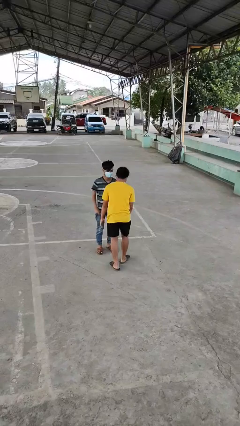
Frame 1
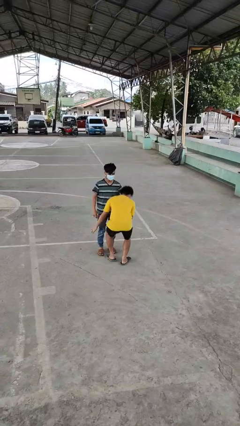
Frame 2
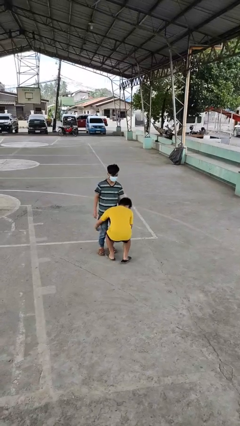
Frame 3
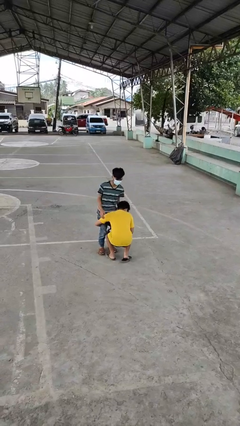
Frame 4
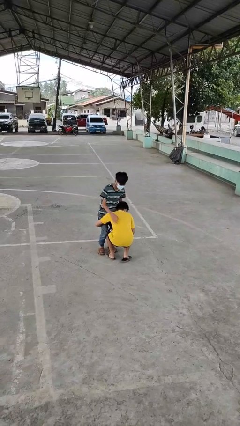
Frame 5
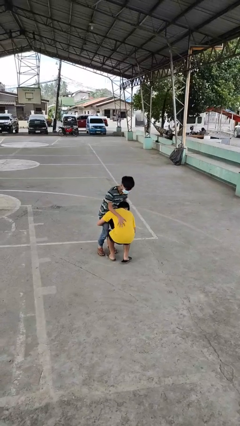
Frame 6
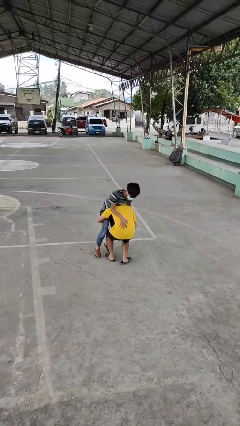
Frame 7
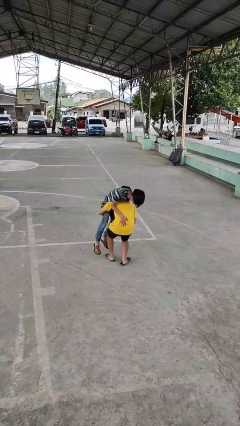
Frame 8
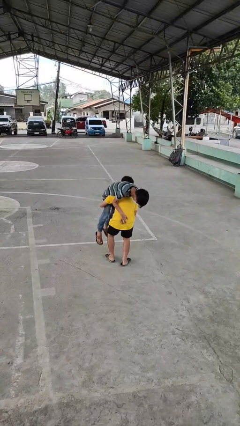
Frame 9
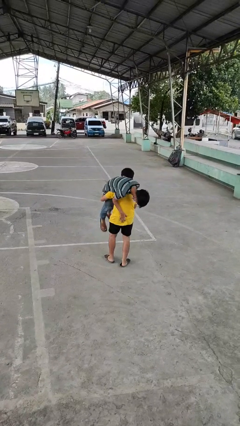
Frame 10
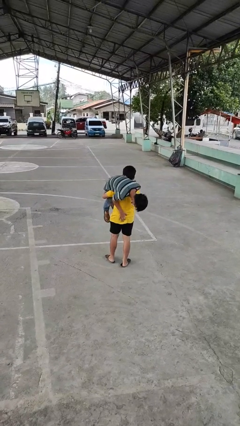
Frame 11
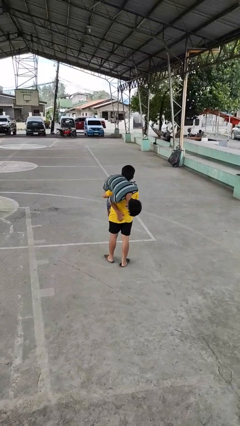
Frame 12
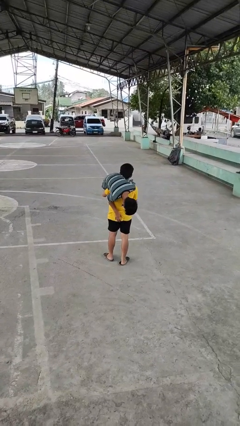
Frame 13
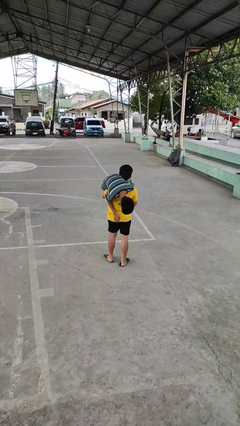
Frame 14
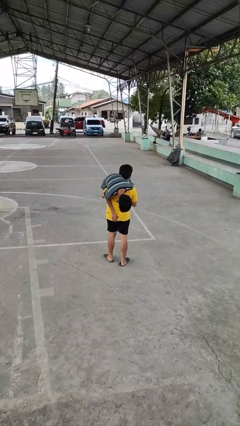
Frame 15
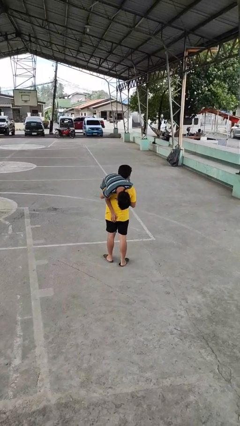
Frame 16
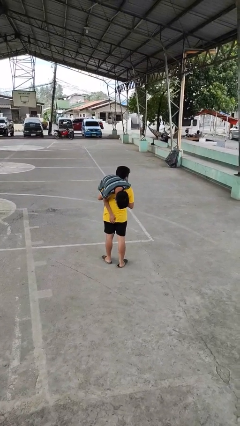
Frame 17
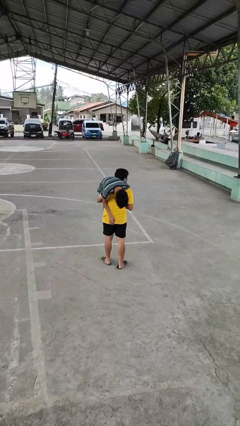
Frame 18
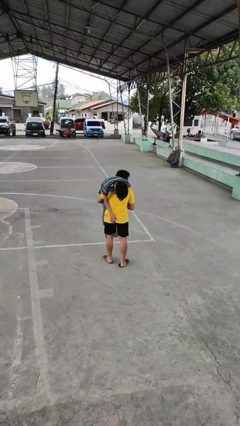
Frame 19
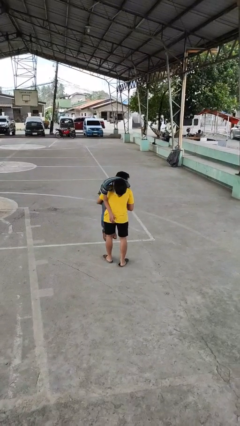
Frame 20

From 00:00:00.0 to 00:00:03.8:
person carries person over shoulder

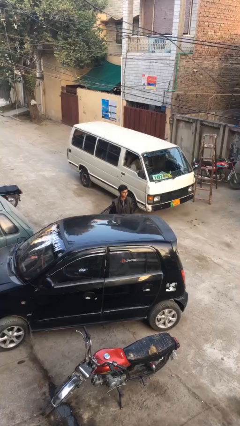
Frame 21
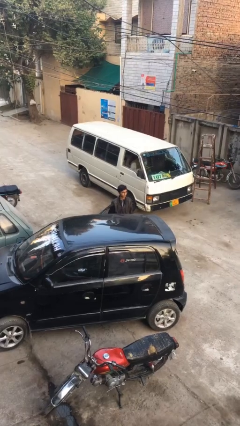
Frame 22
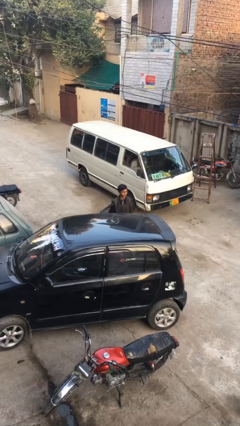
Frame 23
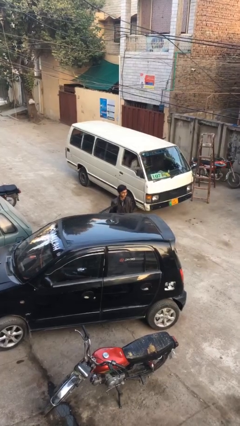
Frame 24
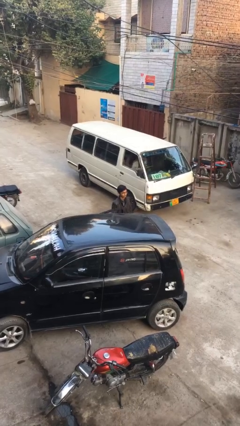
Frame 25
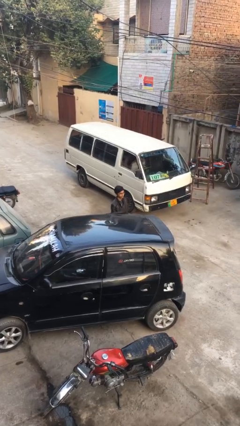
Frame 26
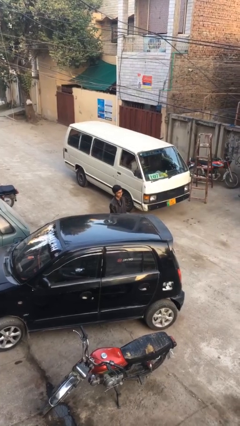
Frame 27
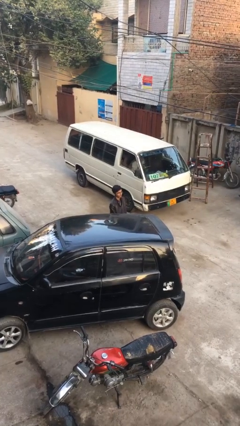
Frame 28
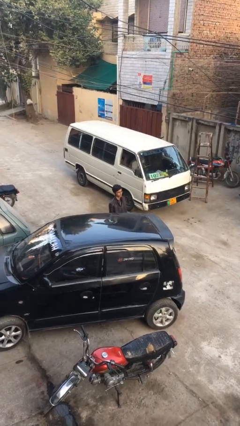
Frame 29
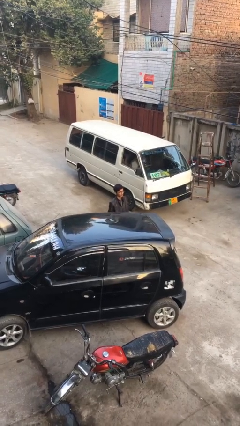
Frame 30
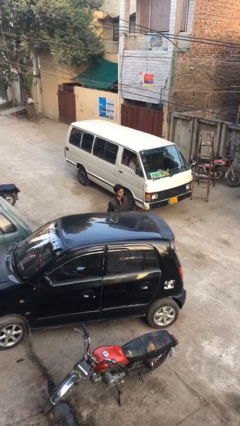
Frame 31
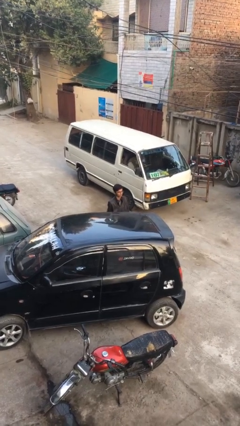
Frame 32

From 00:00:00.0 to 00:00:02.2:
person closes car door

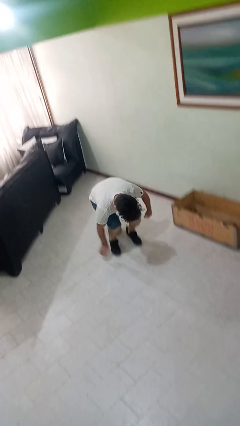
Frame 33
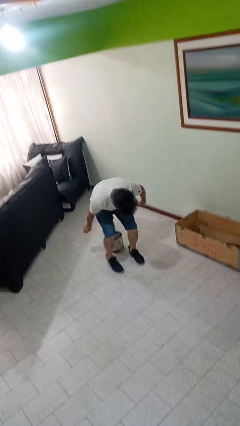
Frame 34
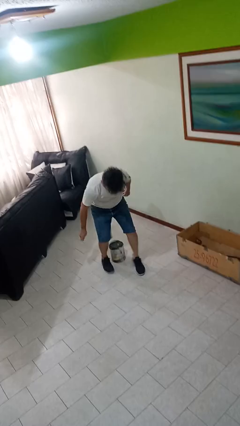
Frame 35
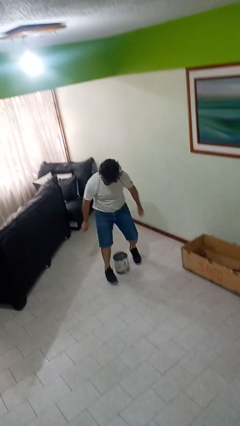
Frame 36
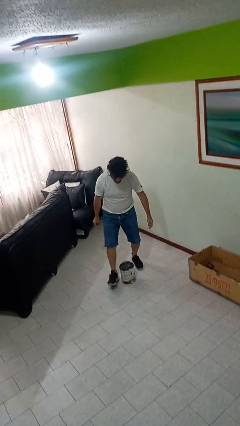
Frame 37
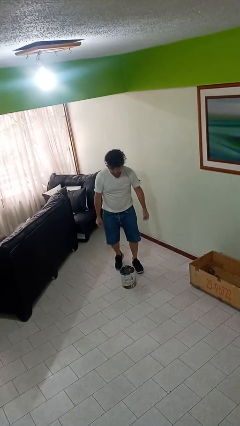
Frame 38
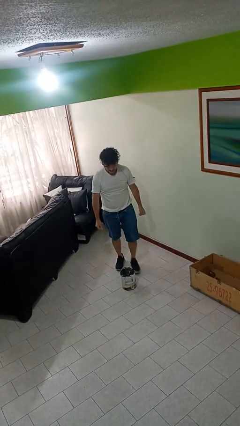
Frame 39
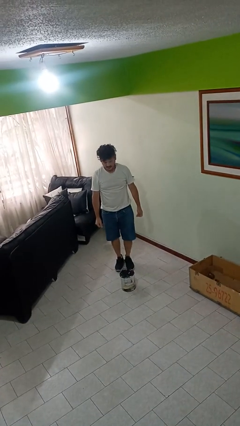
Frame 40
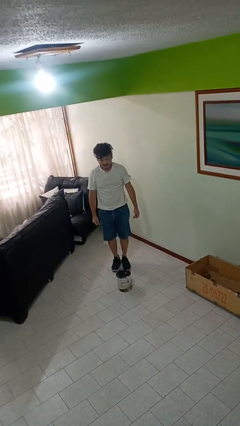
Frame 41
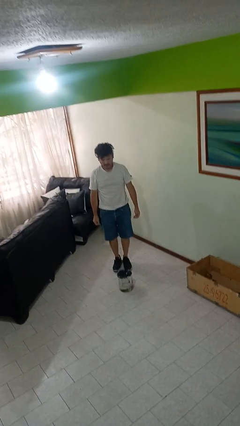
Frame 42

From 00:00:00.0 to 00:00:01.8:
person stands up from floor

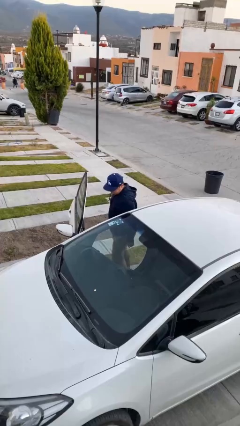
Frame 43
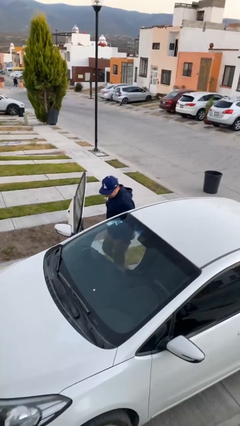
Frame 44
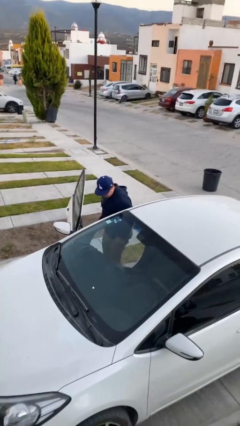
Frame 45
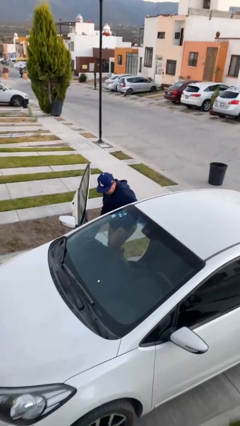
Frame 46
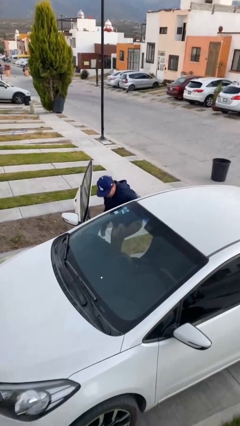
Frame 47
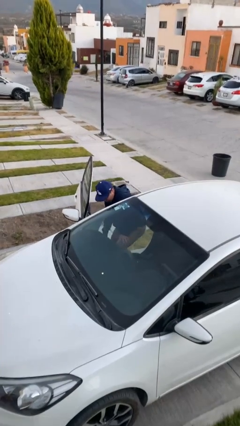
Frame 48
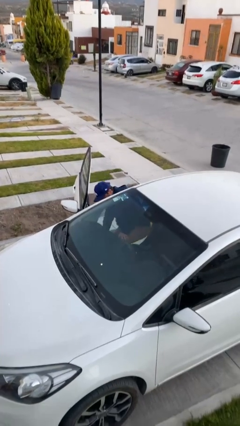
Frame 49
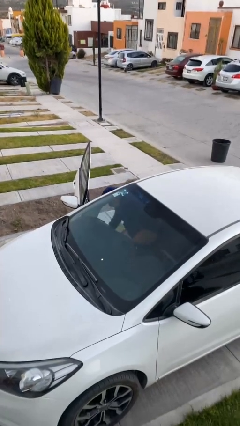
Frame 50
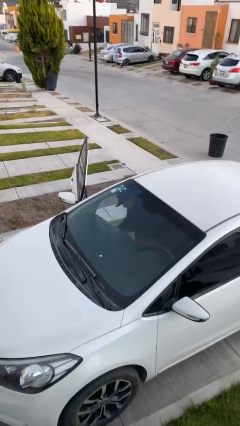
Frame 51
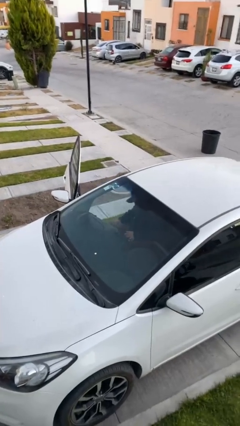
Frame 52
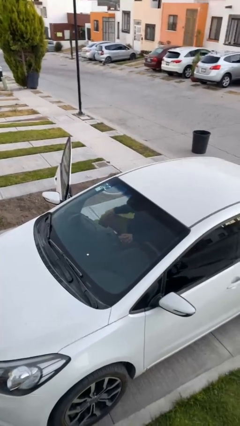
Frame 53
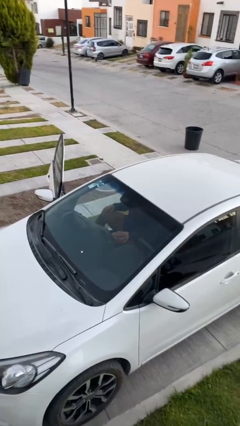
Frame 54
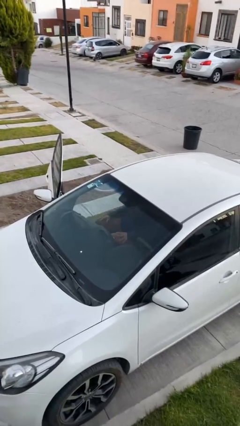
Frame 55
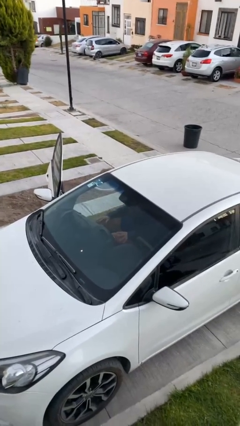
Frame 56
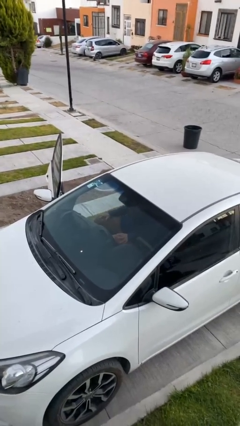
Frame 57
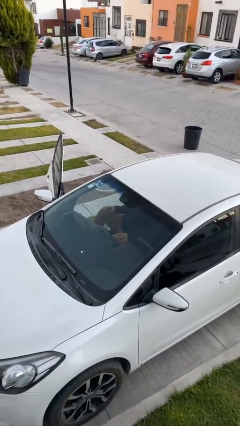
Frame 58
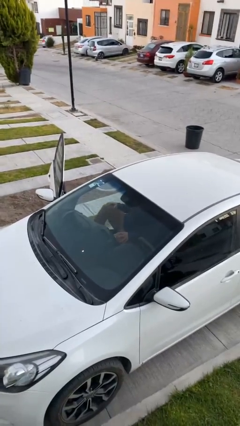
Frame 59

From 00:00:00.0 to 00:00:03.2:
person enters car

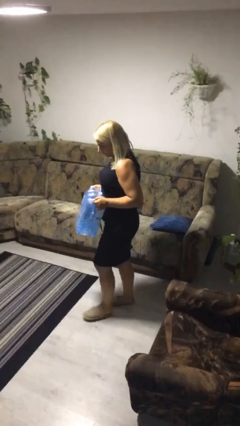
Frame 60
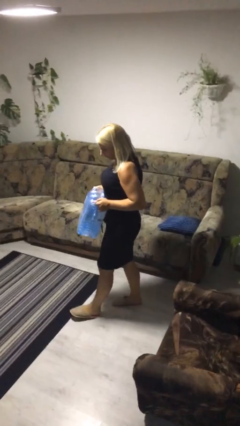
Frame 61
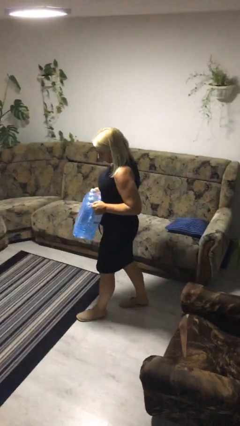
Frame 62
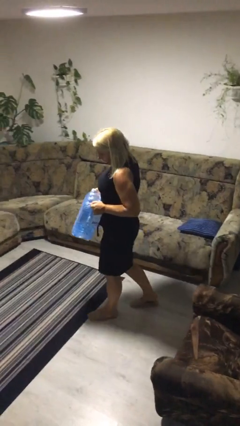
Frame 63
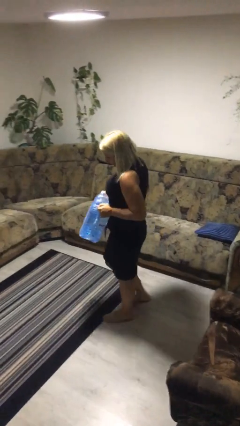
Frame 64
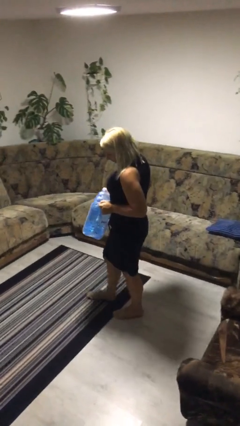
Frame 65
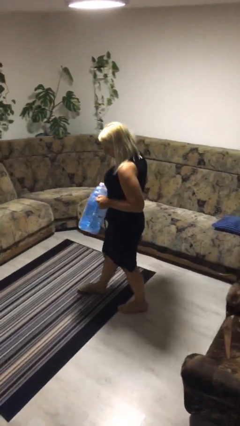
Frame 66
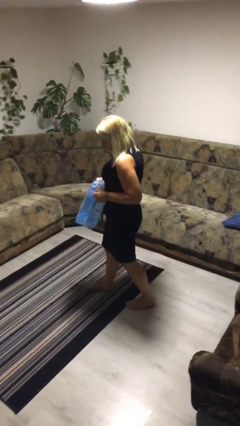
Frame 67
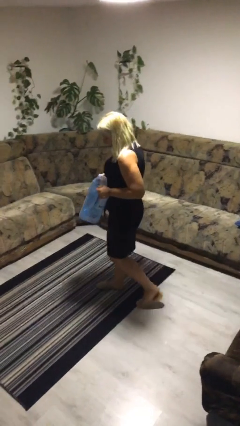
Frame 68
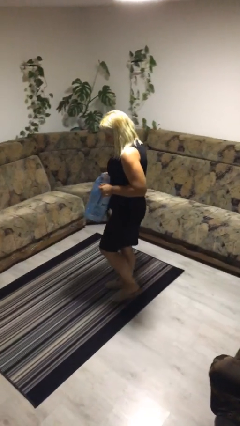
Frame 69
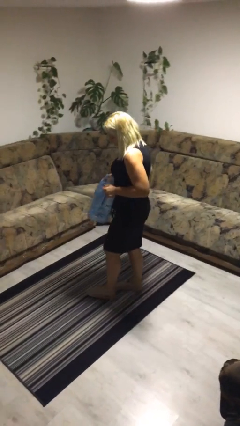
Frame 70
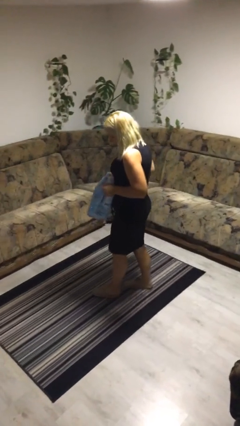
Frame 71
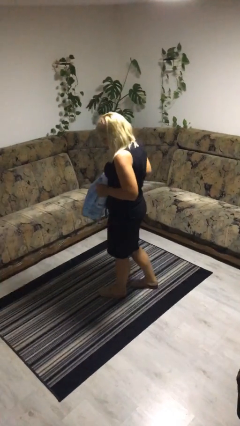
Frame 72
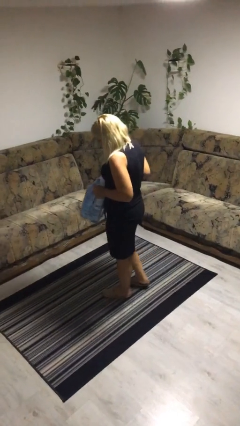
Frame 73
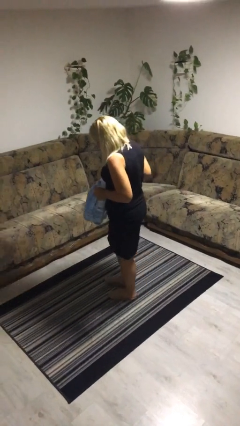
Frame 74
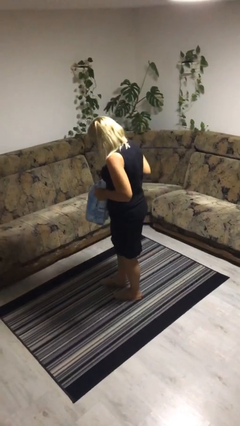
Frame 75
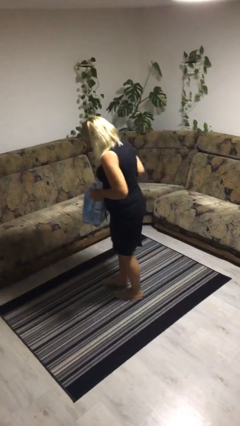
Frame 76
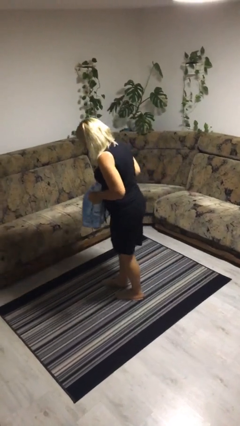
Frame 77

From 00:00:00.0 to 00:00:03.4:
person carries heavy object

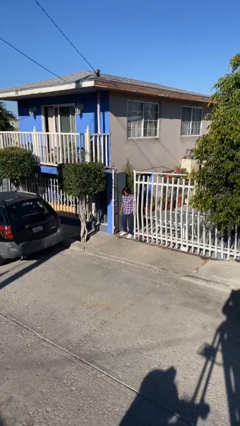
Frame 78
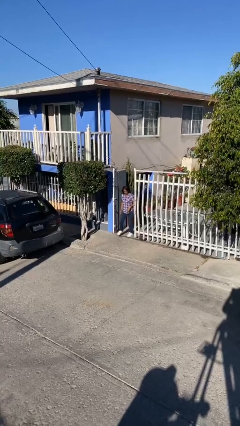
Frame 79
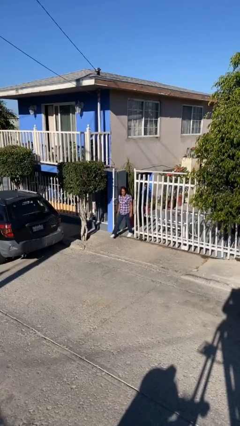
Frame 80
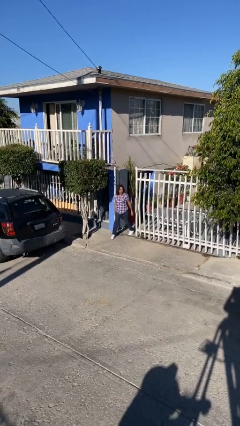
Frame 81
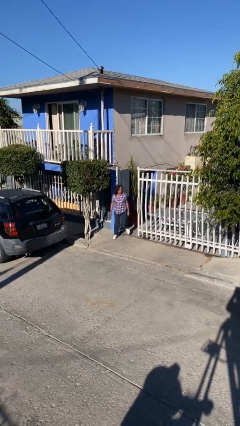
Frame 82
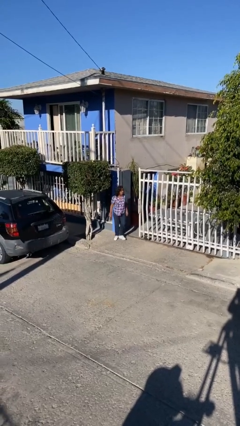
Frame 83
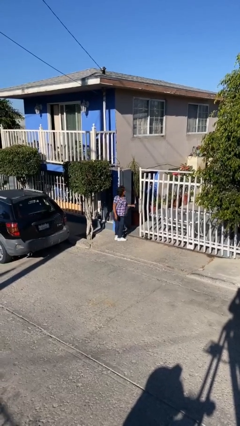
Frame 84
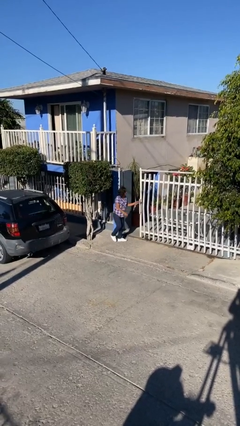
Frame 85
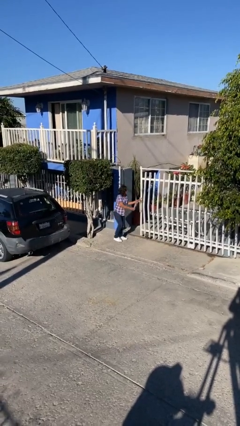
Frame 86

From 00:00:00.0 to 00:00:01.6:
person enters scene through structure

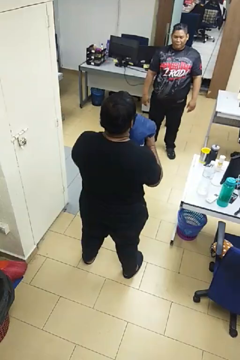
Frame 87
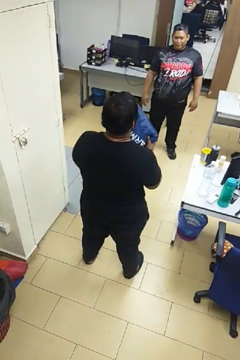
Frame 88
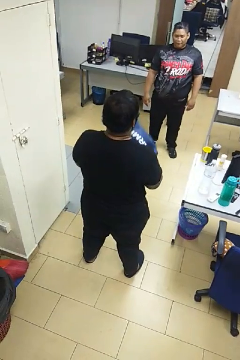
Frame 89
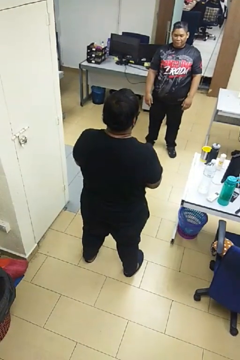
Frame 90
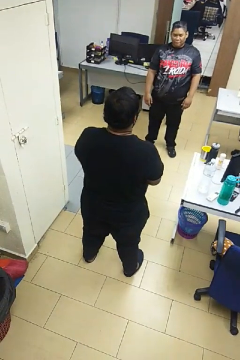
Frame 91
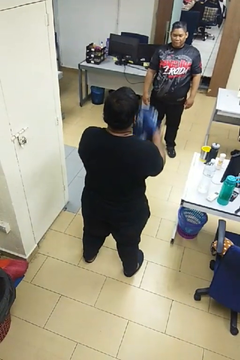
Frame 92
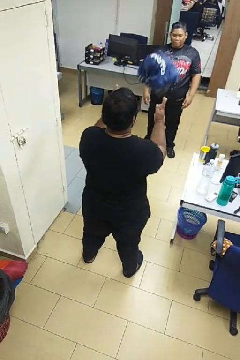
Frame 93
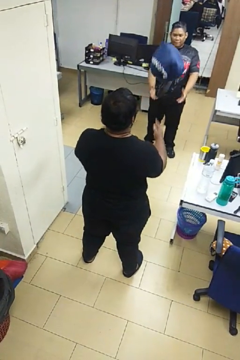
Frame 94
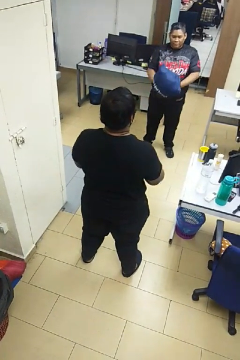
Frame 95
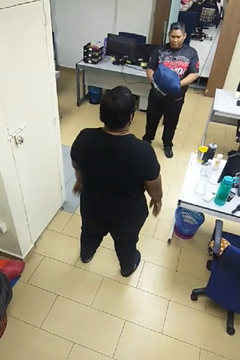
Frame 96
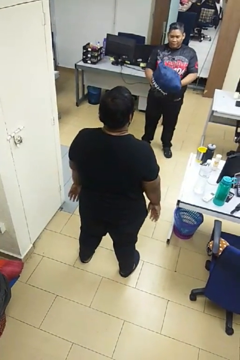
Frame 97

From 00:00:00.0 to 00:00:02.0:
person throws object to person
